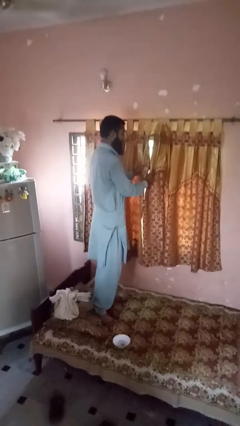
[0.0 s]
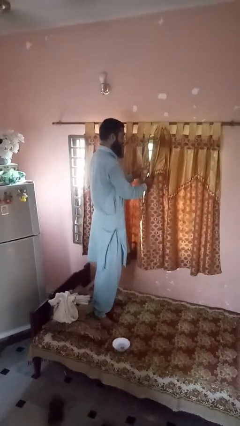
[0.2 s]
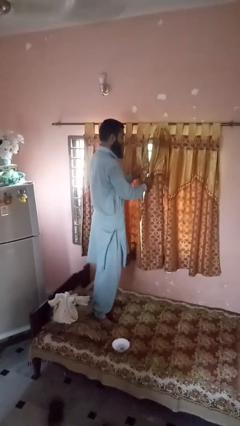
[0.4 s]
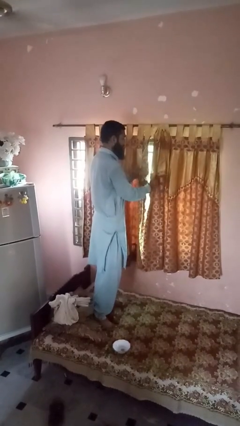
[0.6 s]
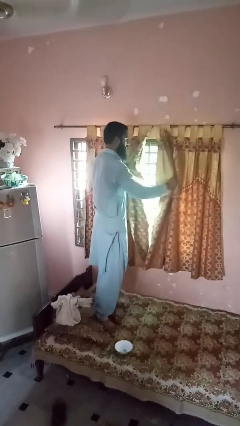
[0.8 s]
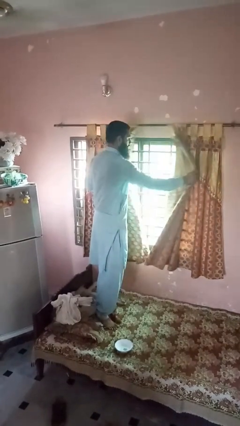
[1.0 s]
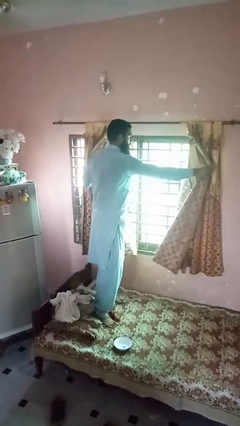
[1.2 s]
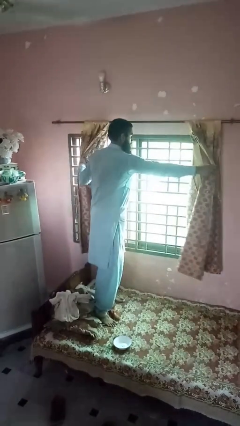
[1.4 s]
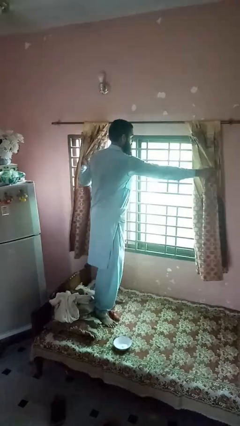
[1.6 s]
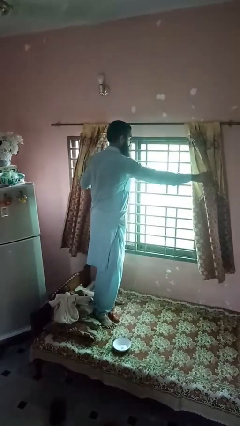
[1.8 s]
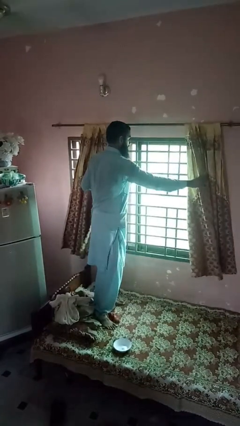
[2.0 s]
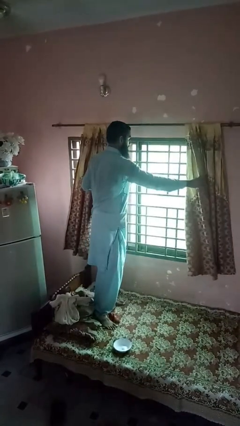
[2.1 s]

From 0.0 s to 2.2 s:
person opens curtains

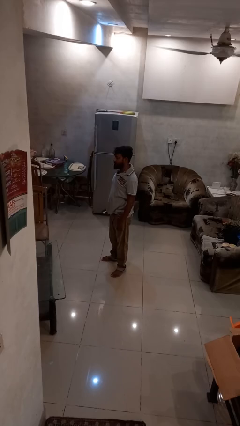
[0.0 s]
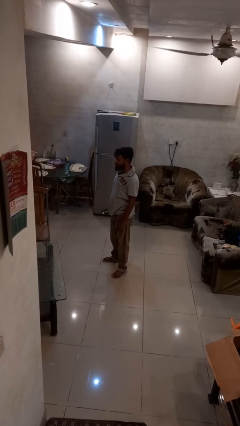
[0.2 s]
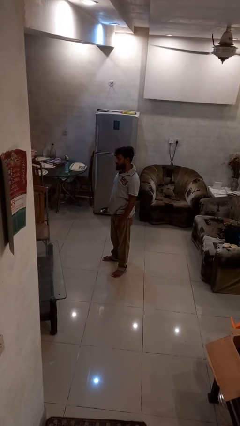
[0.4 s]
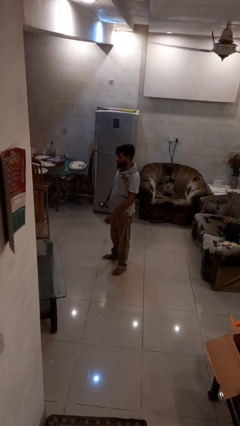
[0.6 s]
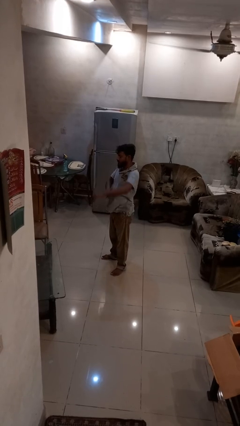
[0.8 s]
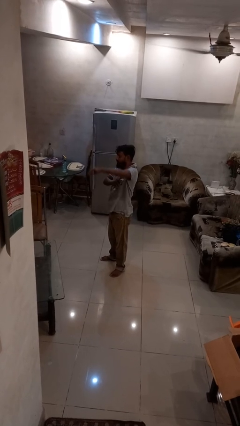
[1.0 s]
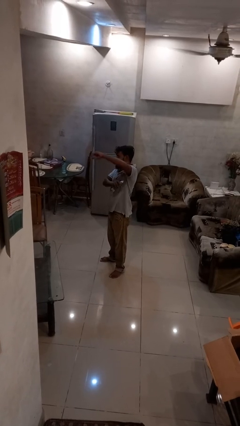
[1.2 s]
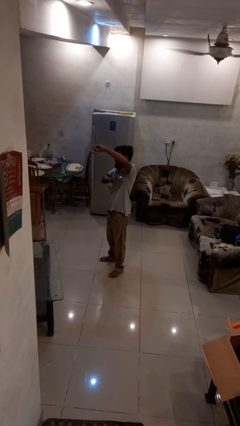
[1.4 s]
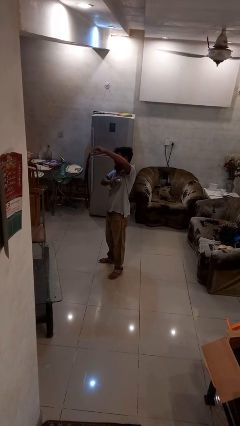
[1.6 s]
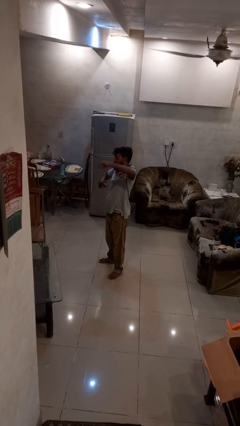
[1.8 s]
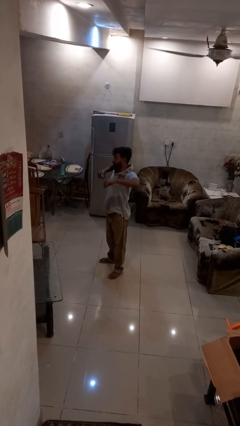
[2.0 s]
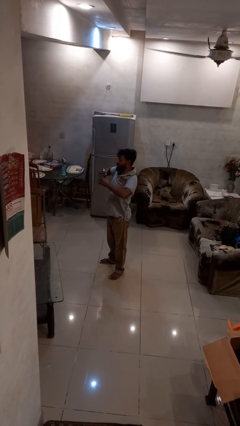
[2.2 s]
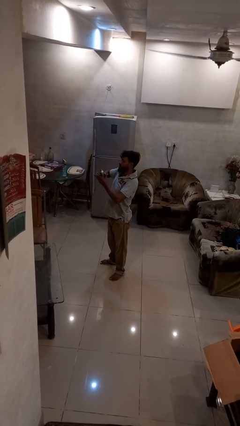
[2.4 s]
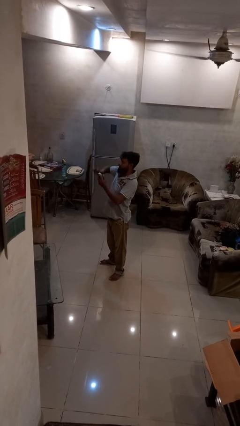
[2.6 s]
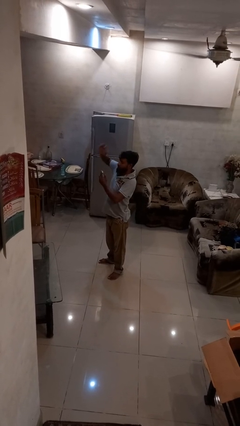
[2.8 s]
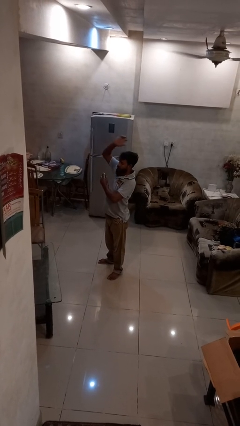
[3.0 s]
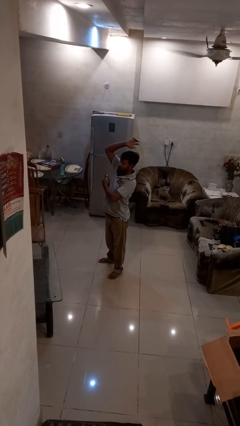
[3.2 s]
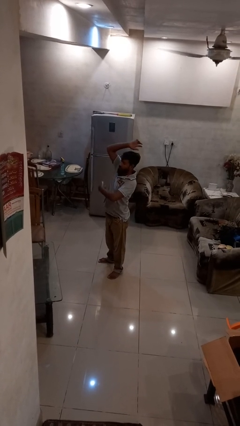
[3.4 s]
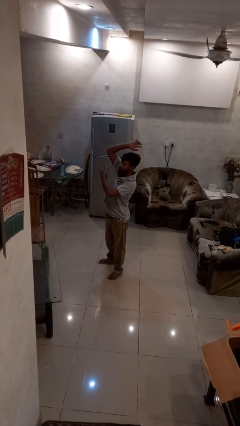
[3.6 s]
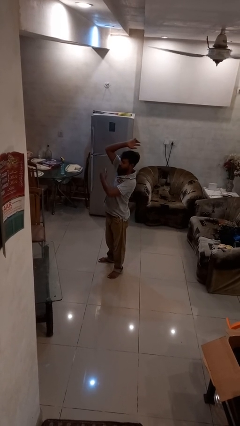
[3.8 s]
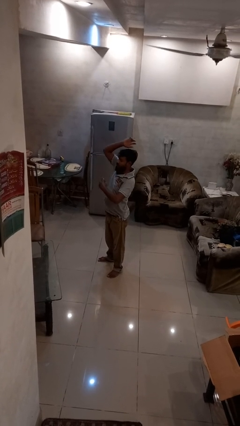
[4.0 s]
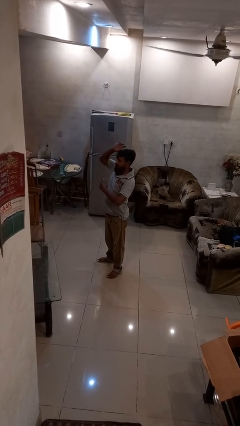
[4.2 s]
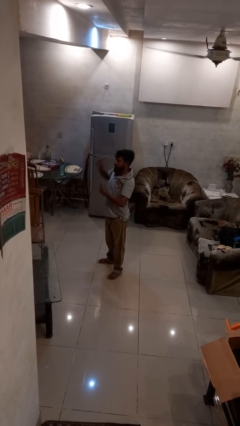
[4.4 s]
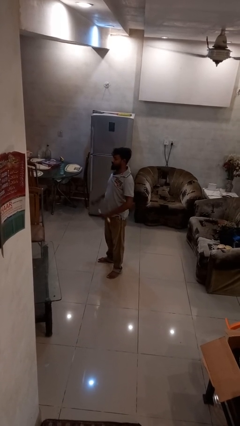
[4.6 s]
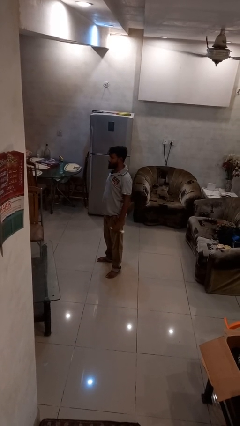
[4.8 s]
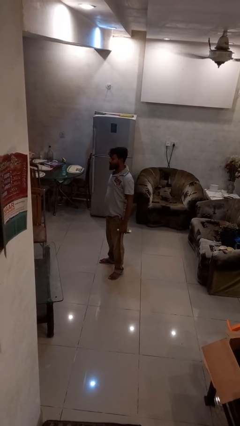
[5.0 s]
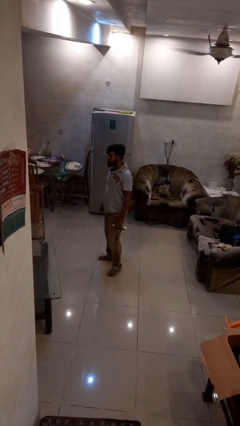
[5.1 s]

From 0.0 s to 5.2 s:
person applies deodorant

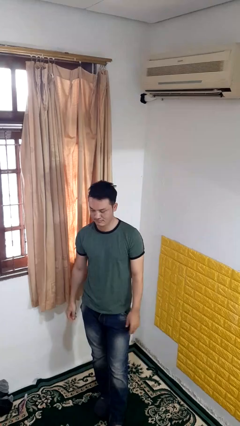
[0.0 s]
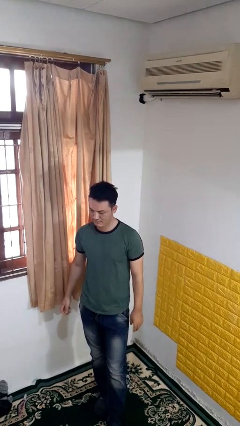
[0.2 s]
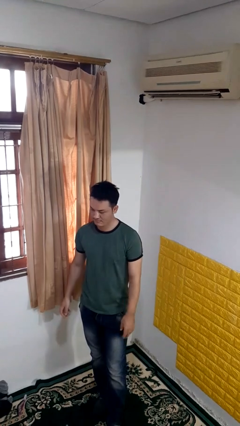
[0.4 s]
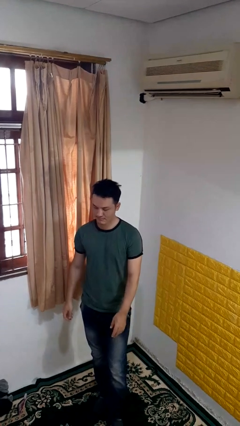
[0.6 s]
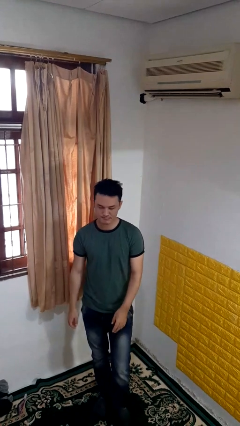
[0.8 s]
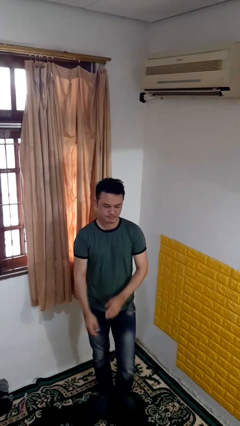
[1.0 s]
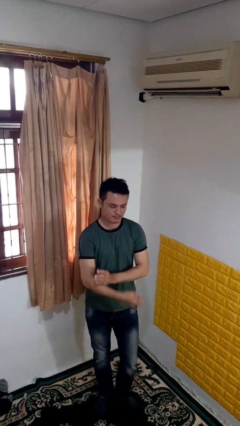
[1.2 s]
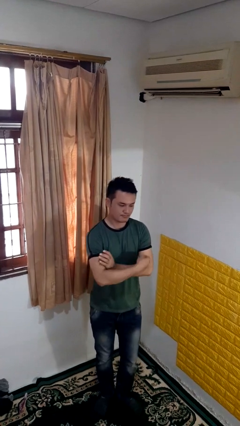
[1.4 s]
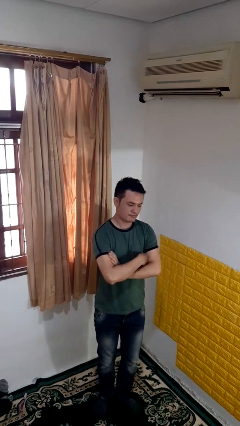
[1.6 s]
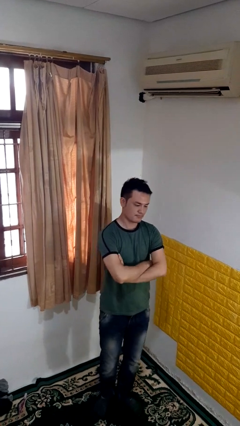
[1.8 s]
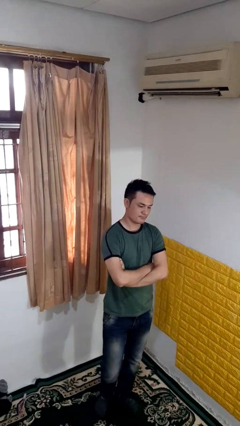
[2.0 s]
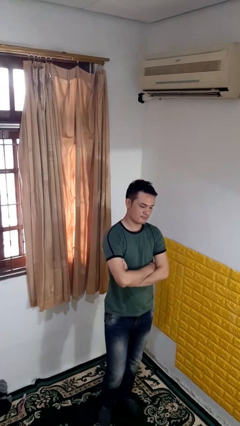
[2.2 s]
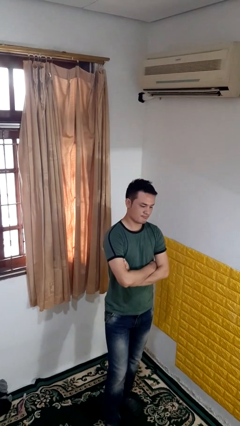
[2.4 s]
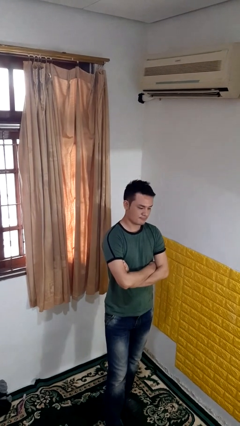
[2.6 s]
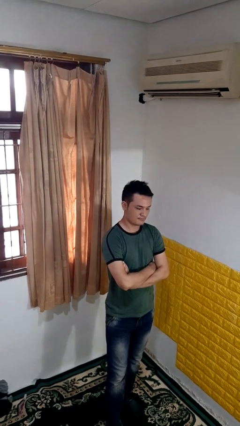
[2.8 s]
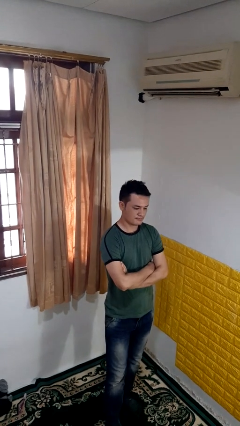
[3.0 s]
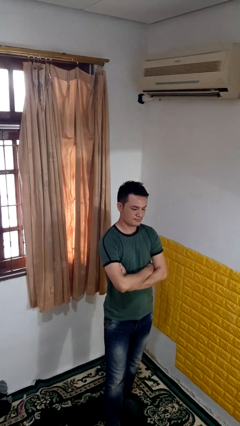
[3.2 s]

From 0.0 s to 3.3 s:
person crosses arms

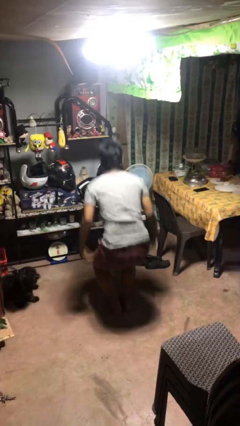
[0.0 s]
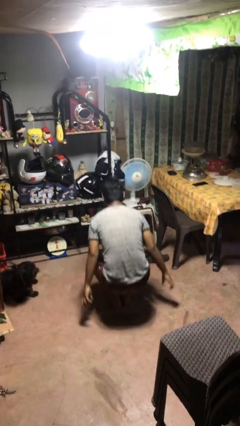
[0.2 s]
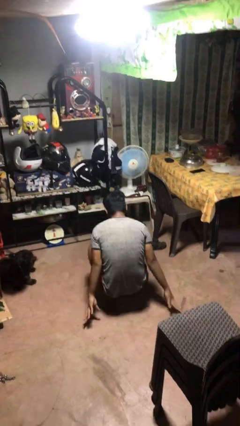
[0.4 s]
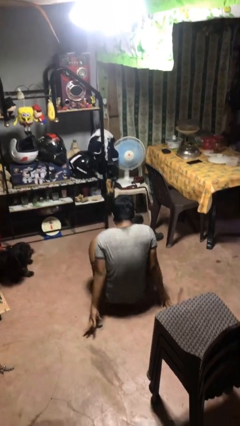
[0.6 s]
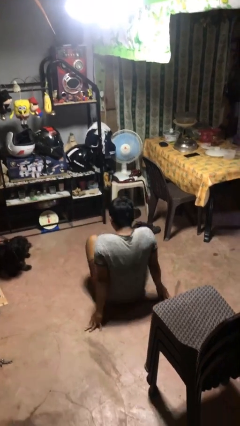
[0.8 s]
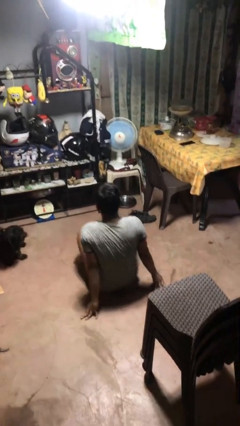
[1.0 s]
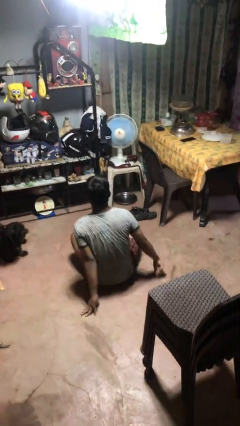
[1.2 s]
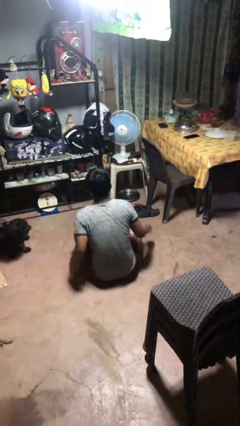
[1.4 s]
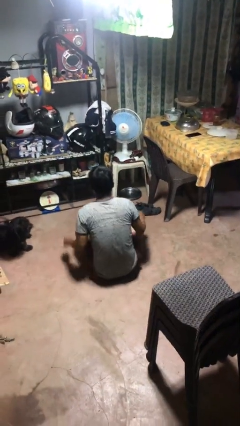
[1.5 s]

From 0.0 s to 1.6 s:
person sits crisscross

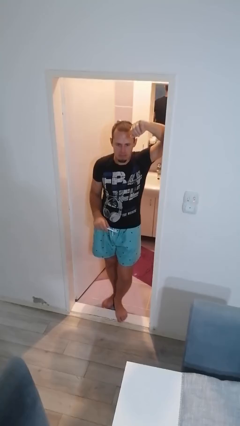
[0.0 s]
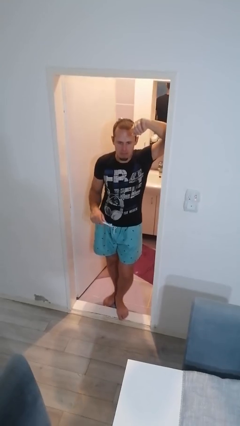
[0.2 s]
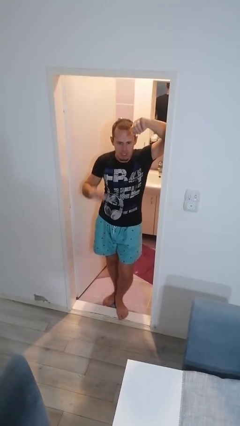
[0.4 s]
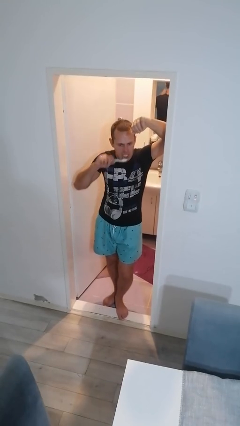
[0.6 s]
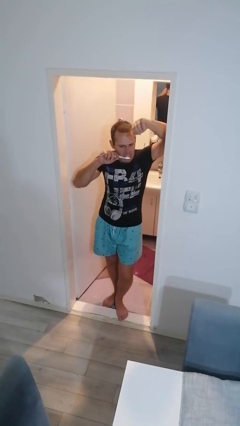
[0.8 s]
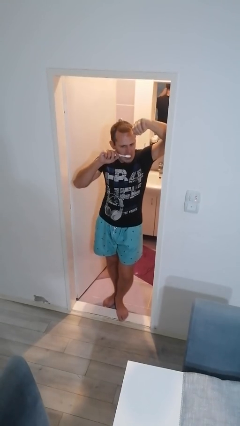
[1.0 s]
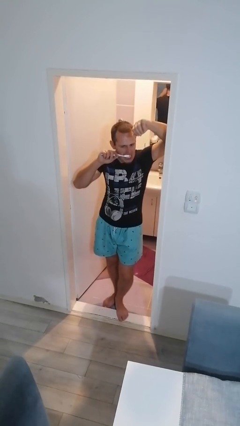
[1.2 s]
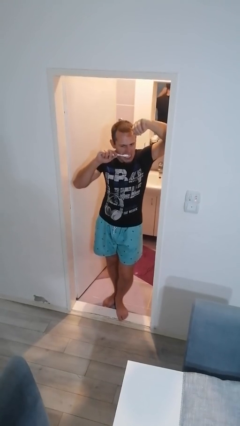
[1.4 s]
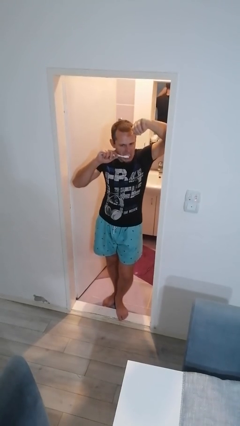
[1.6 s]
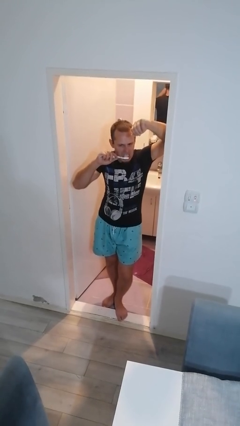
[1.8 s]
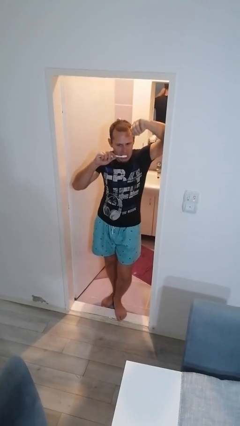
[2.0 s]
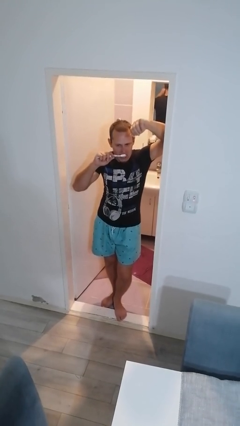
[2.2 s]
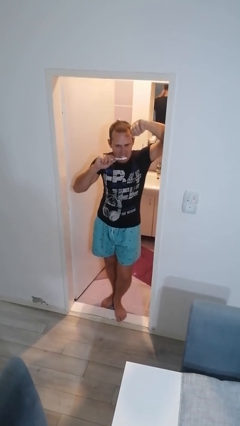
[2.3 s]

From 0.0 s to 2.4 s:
person brushes teeth

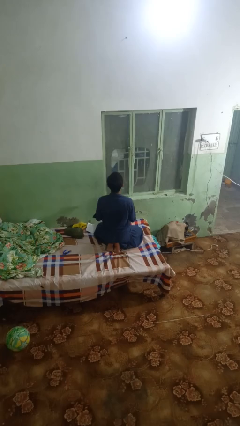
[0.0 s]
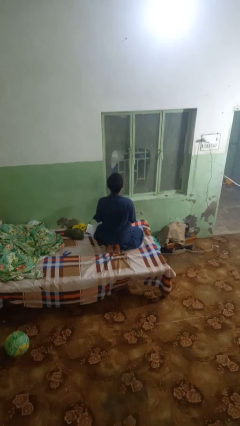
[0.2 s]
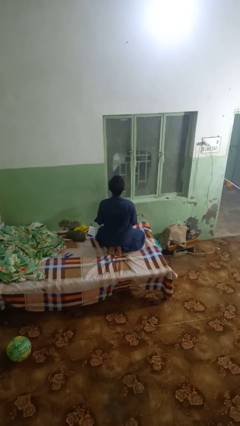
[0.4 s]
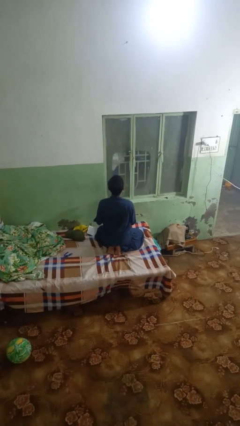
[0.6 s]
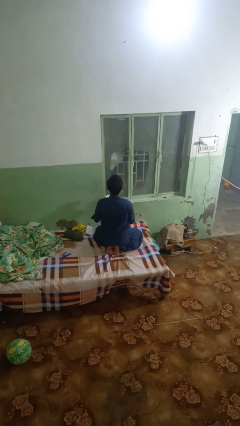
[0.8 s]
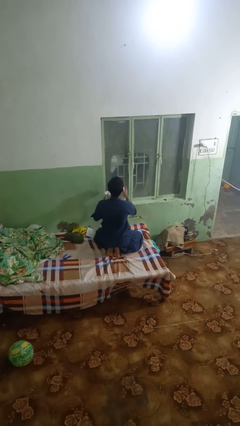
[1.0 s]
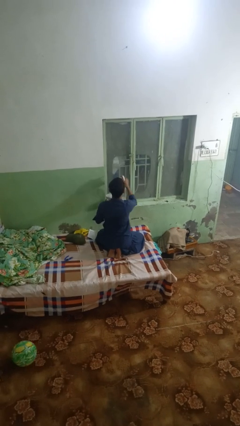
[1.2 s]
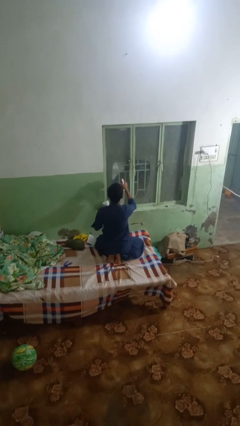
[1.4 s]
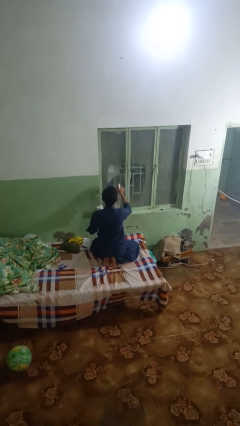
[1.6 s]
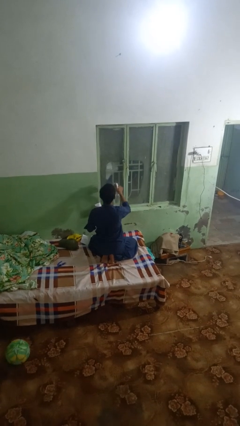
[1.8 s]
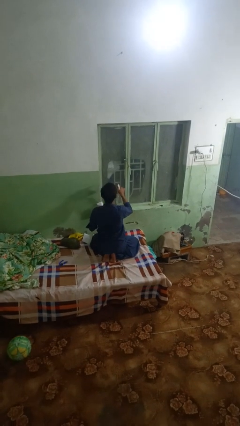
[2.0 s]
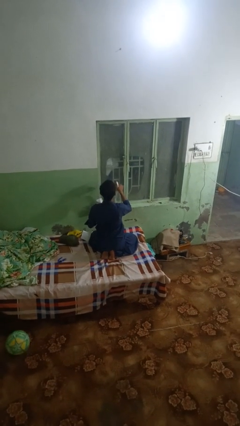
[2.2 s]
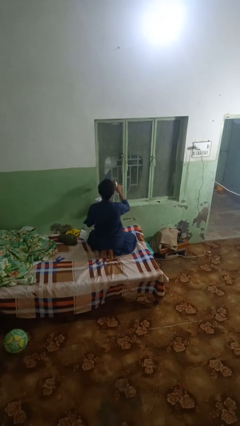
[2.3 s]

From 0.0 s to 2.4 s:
person sprays from bottle

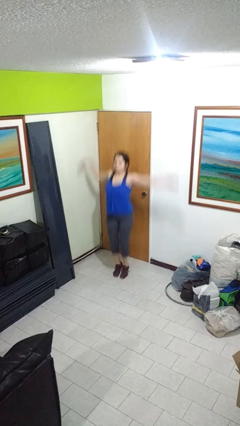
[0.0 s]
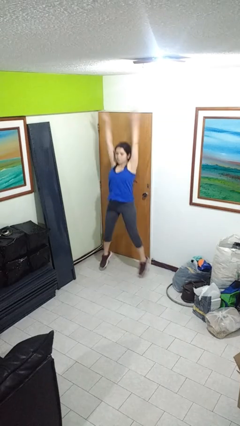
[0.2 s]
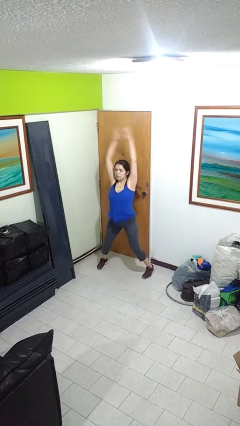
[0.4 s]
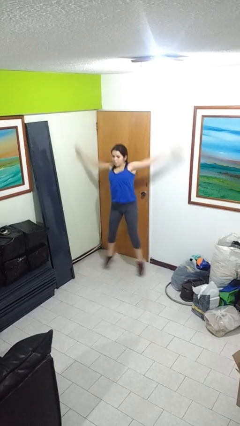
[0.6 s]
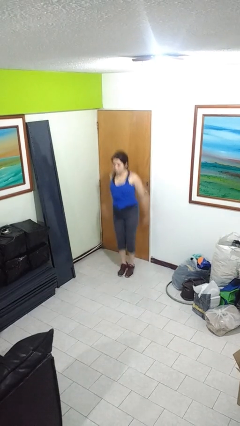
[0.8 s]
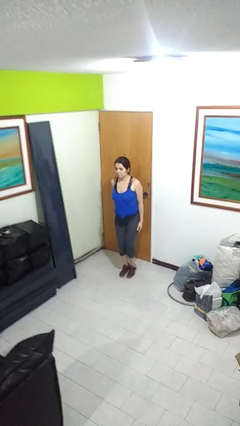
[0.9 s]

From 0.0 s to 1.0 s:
person exercises with jumping jacks
